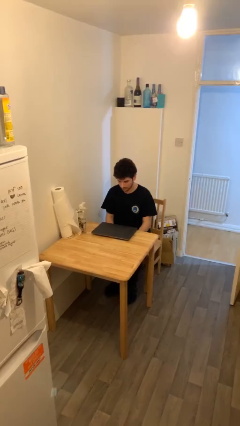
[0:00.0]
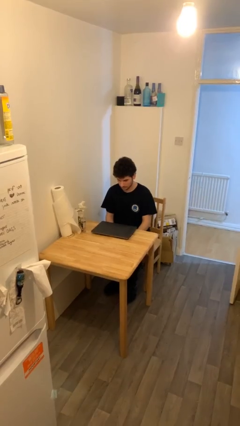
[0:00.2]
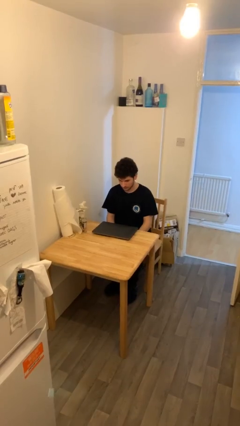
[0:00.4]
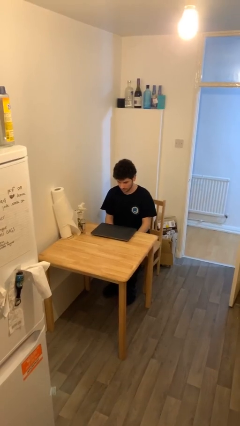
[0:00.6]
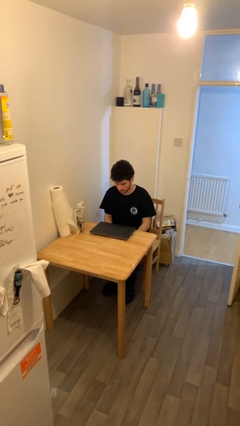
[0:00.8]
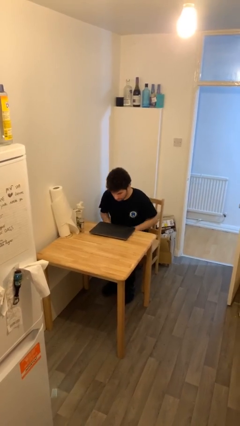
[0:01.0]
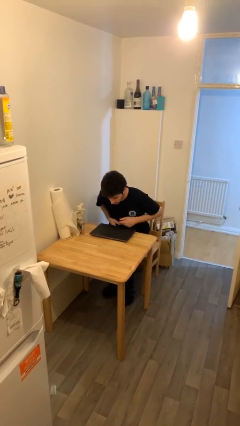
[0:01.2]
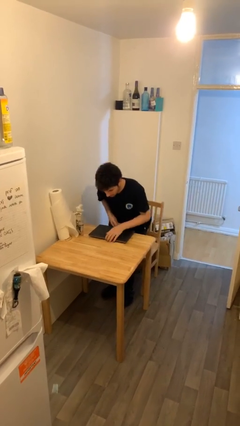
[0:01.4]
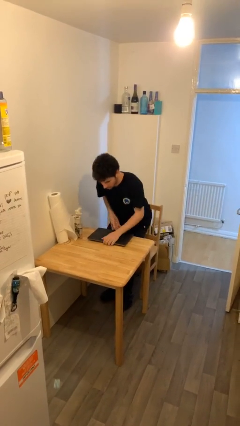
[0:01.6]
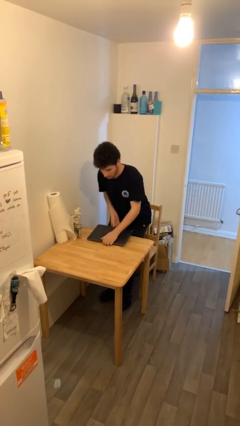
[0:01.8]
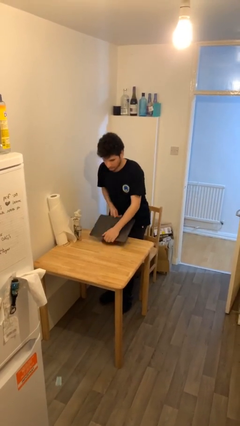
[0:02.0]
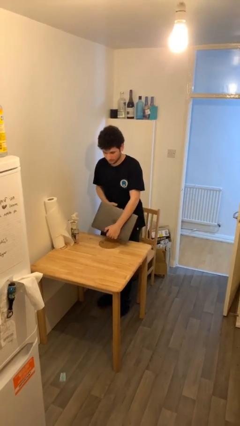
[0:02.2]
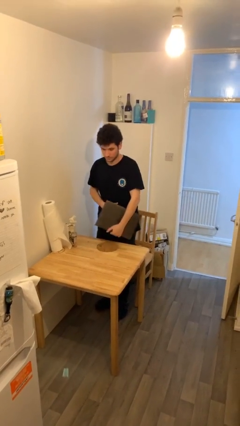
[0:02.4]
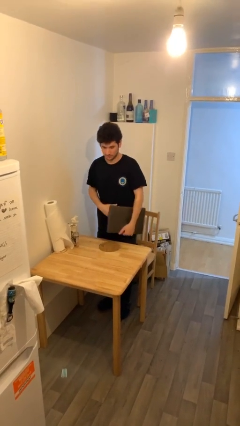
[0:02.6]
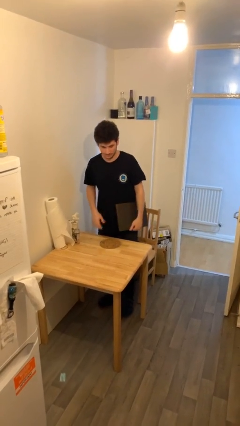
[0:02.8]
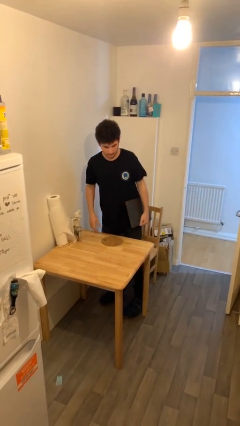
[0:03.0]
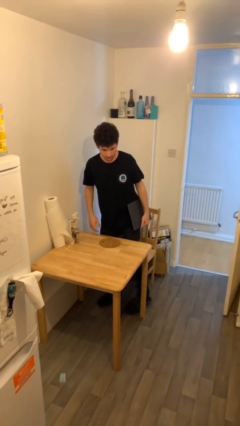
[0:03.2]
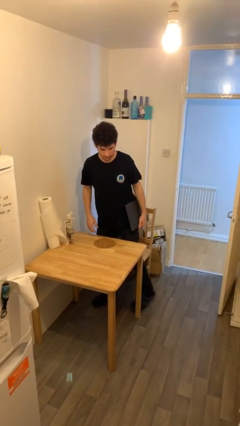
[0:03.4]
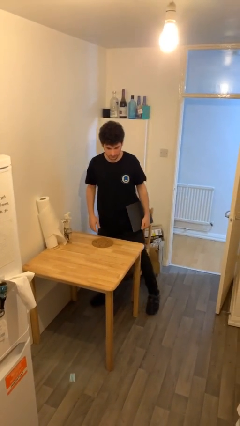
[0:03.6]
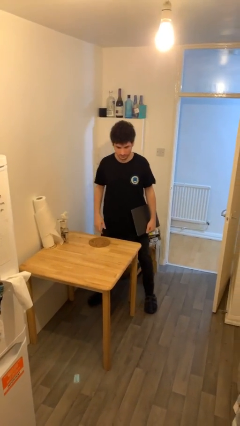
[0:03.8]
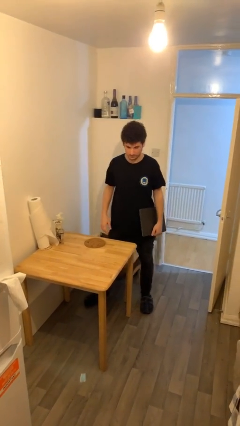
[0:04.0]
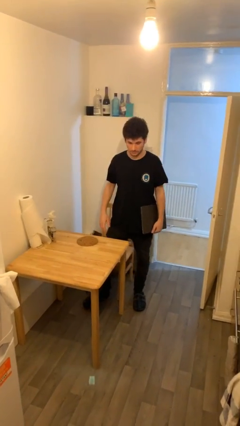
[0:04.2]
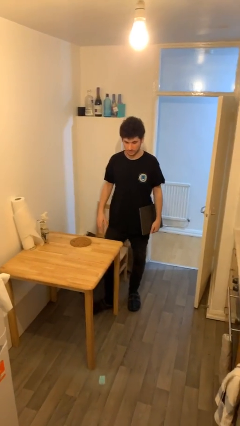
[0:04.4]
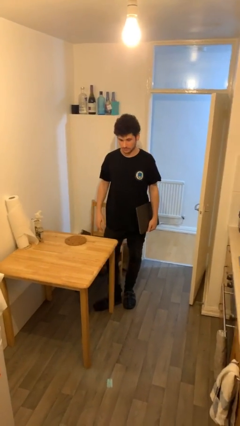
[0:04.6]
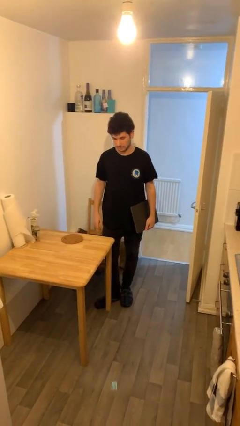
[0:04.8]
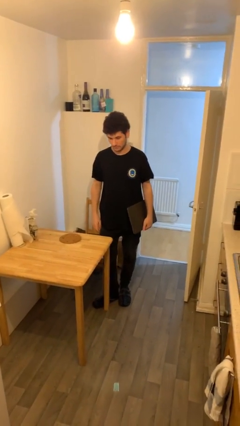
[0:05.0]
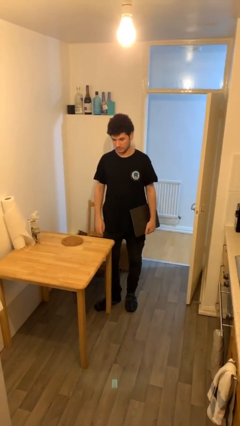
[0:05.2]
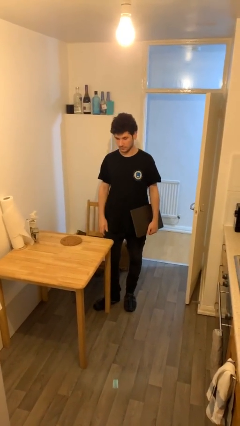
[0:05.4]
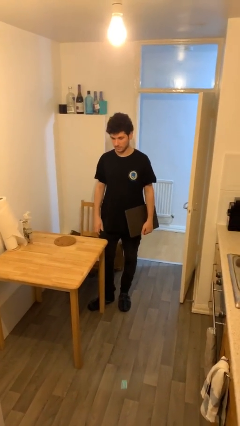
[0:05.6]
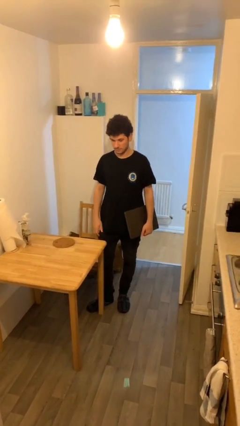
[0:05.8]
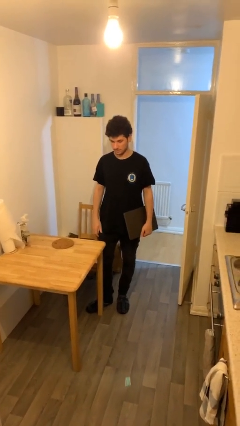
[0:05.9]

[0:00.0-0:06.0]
person stands up

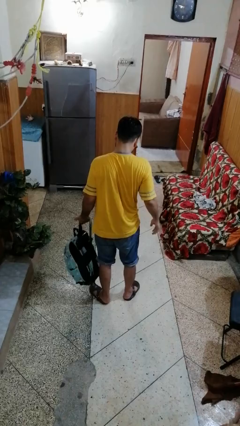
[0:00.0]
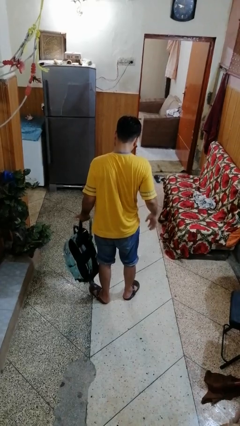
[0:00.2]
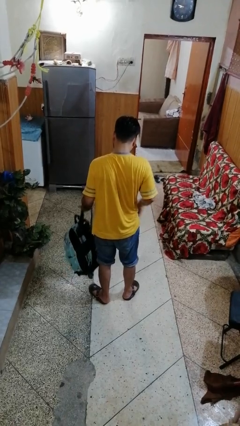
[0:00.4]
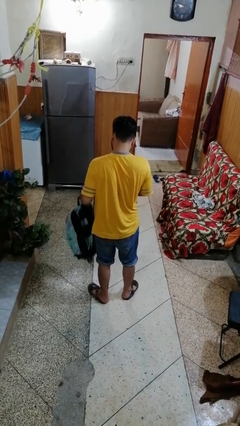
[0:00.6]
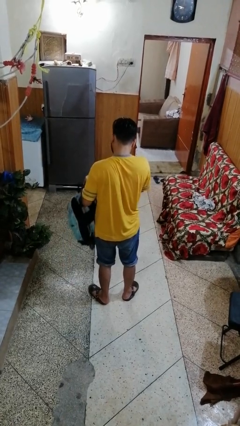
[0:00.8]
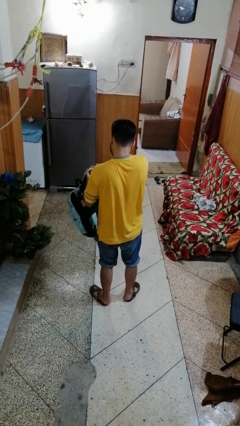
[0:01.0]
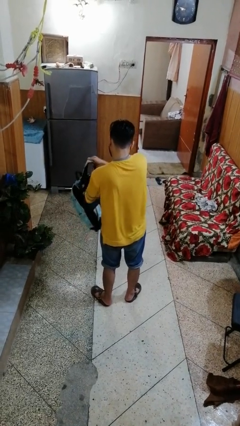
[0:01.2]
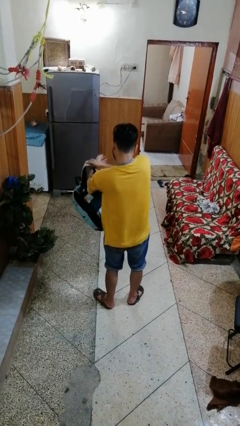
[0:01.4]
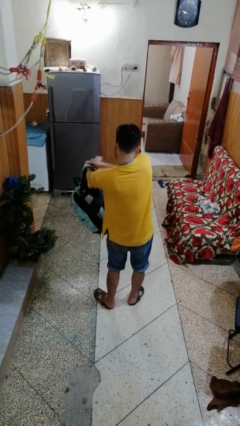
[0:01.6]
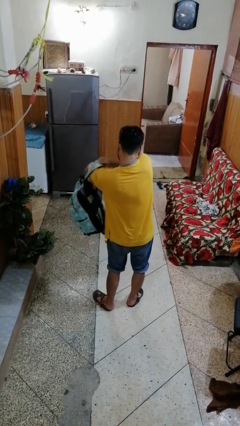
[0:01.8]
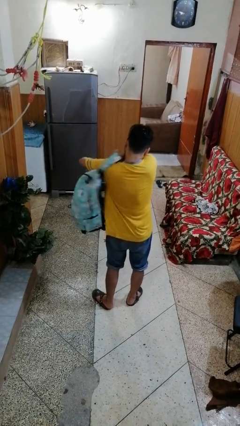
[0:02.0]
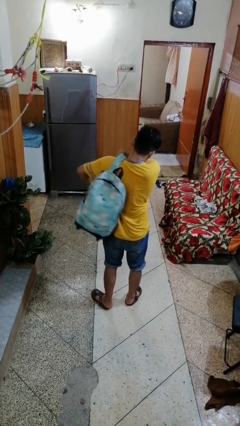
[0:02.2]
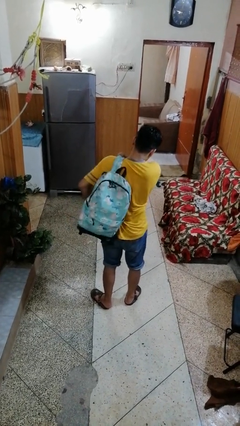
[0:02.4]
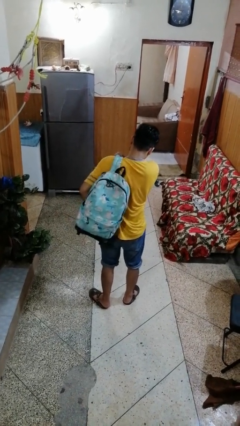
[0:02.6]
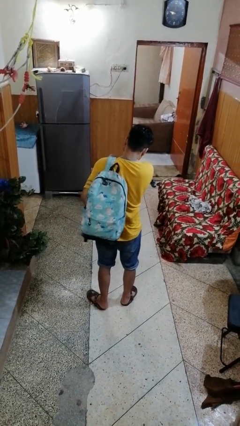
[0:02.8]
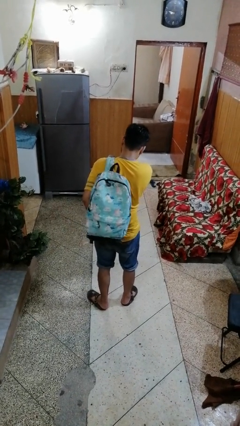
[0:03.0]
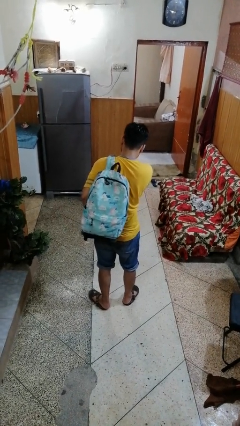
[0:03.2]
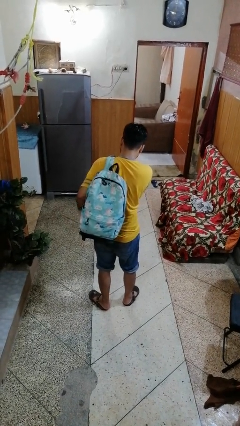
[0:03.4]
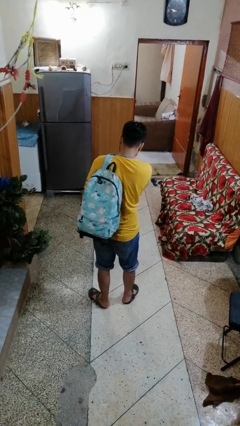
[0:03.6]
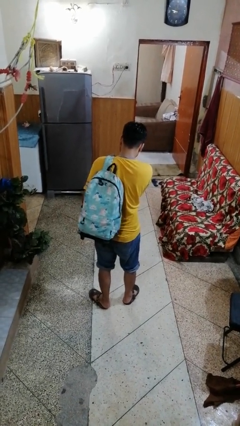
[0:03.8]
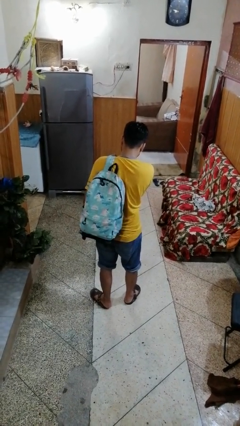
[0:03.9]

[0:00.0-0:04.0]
person puts on backpack

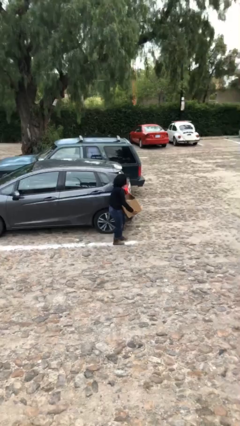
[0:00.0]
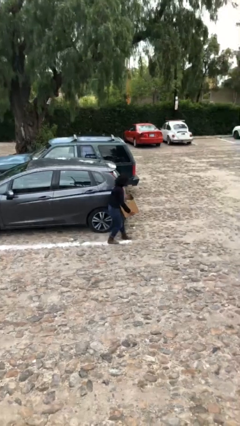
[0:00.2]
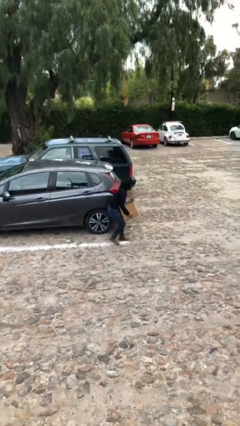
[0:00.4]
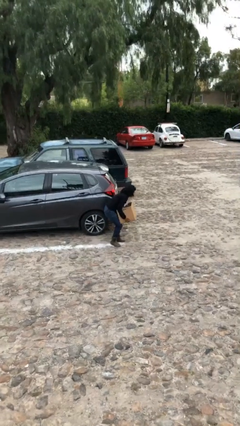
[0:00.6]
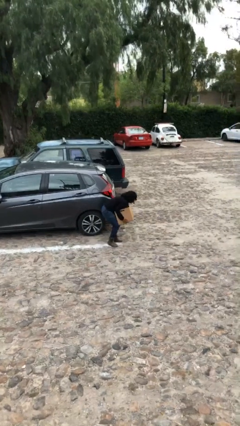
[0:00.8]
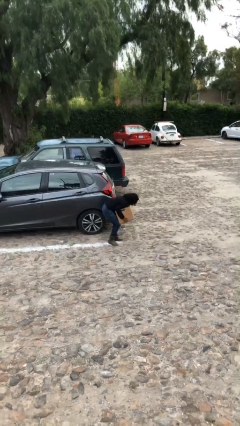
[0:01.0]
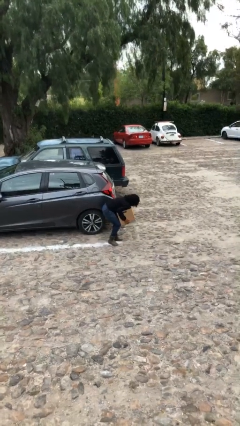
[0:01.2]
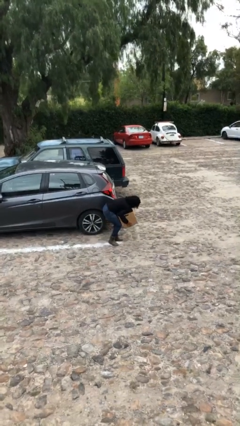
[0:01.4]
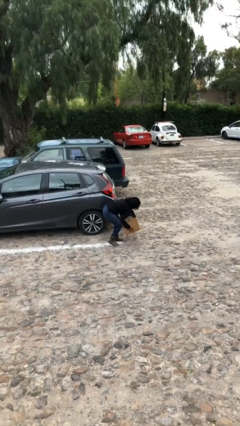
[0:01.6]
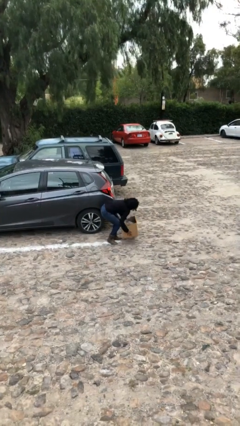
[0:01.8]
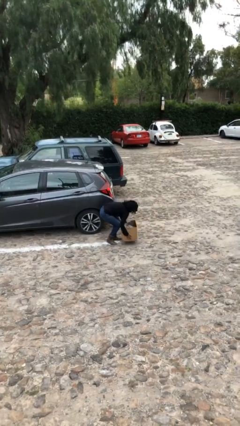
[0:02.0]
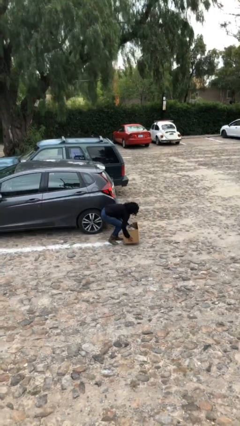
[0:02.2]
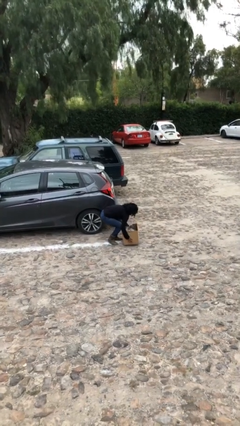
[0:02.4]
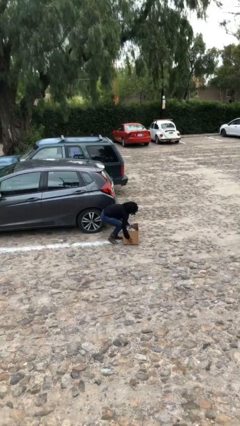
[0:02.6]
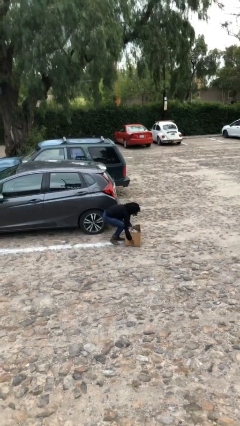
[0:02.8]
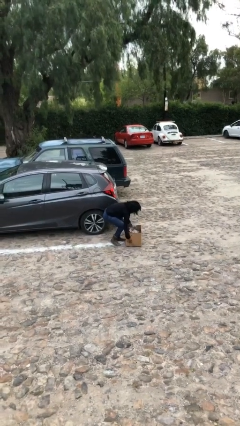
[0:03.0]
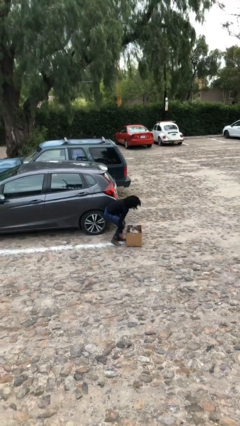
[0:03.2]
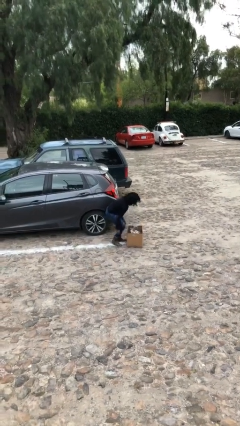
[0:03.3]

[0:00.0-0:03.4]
person puts down object on floor

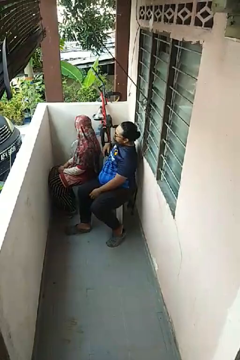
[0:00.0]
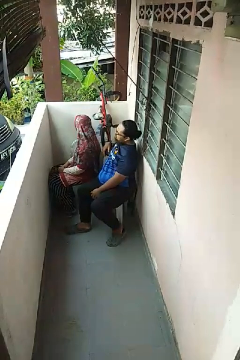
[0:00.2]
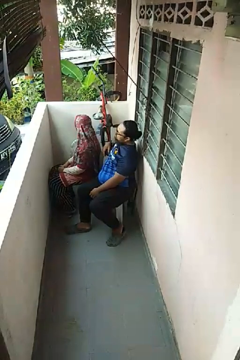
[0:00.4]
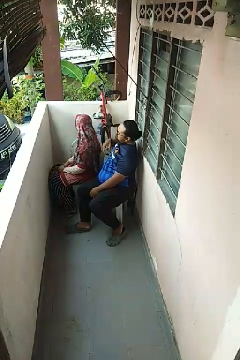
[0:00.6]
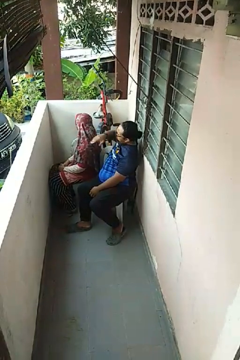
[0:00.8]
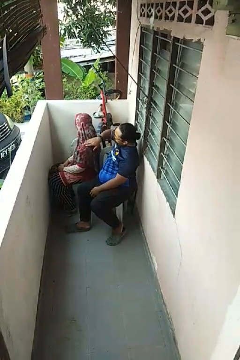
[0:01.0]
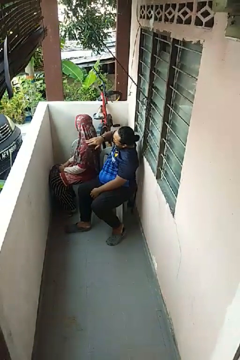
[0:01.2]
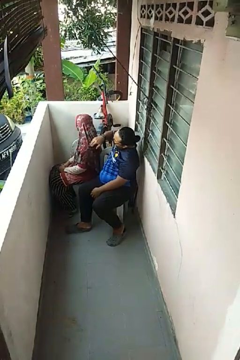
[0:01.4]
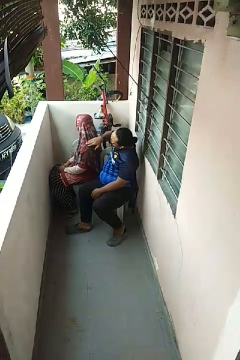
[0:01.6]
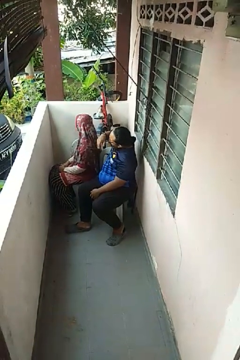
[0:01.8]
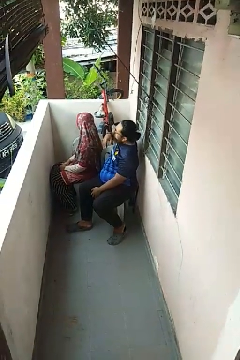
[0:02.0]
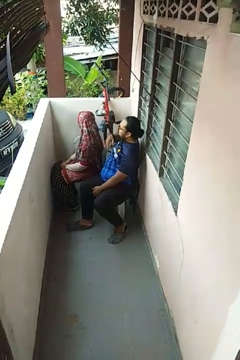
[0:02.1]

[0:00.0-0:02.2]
person touches back of person

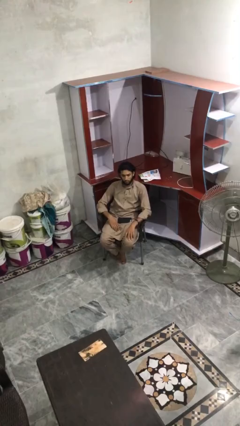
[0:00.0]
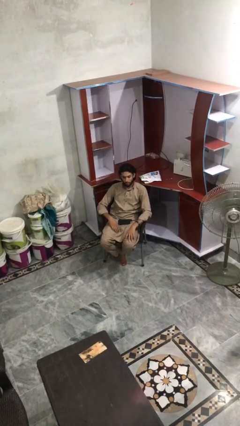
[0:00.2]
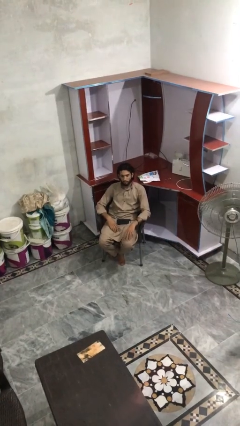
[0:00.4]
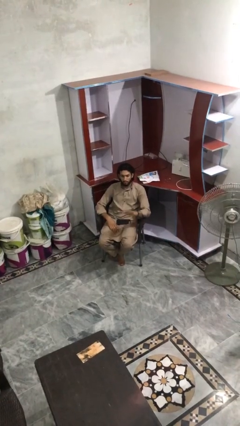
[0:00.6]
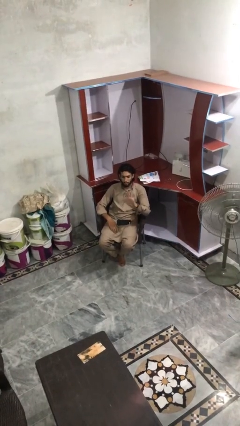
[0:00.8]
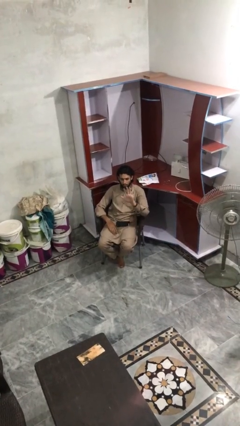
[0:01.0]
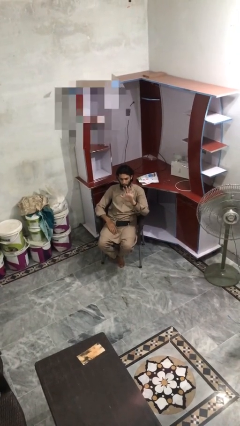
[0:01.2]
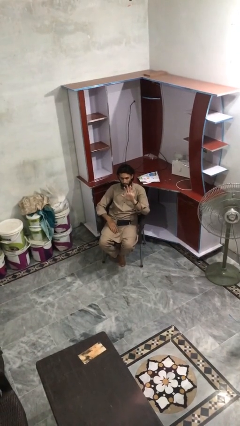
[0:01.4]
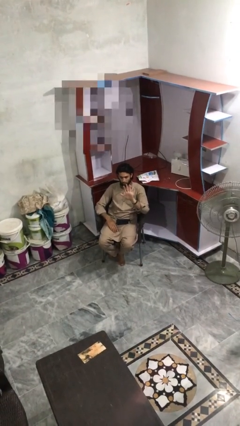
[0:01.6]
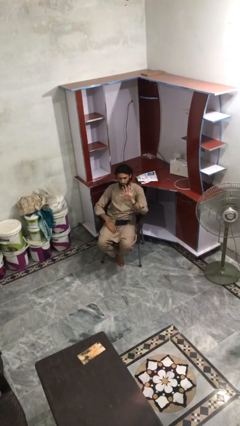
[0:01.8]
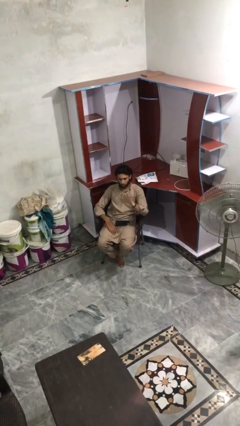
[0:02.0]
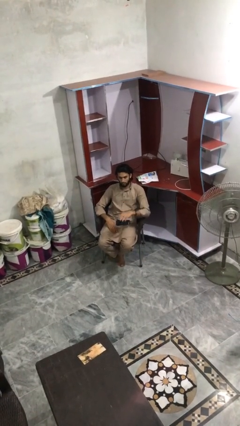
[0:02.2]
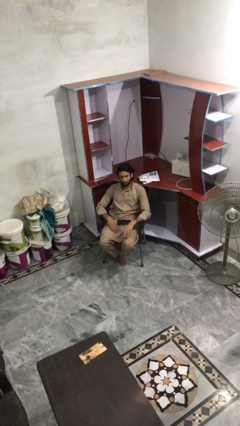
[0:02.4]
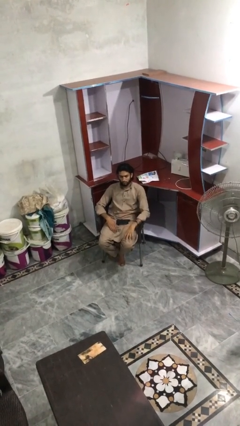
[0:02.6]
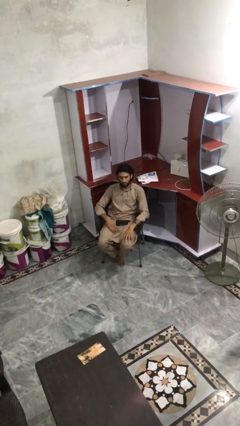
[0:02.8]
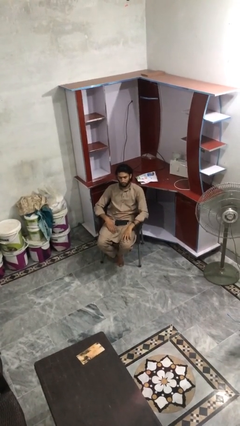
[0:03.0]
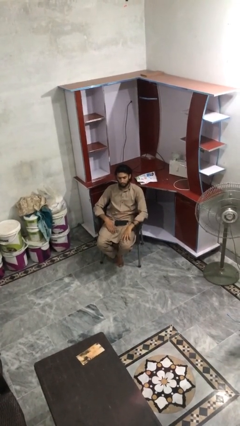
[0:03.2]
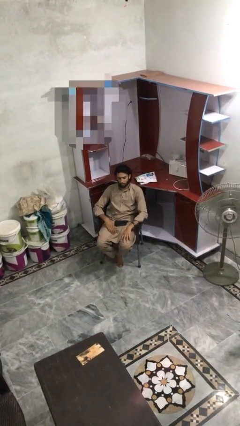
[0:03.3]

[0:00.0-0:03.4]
person gestures number five
